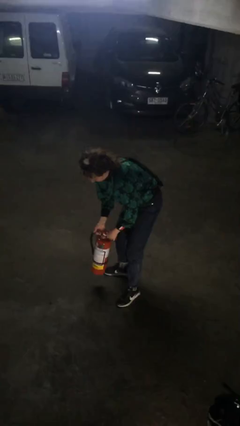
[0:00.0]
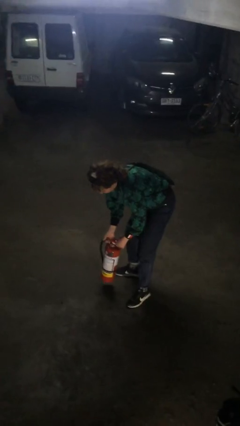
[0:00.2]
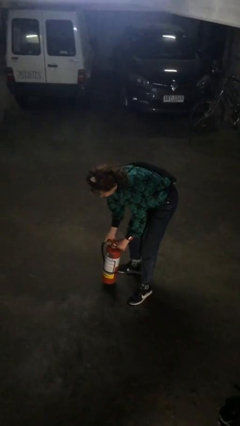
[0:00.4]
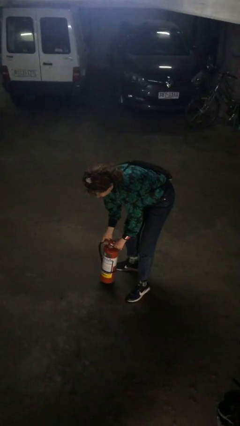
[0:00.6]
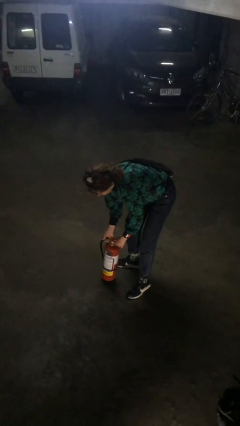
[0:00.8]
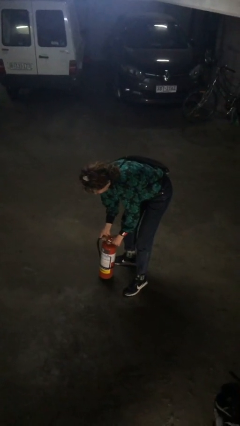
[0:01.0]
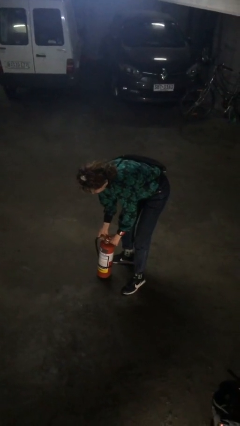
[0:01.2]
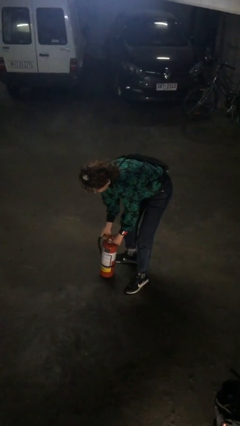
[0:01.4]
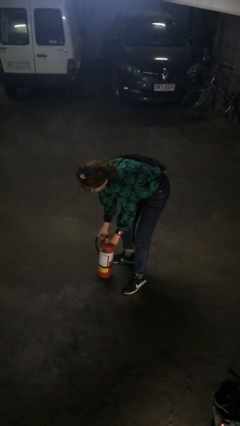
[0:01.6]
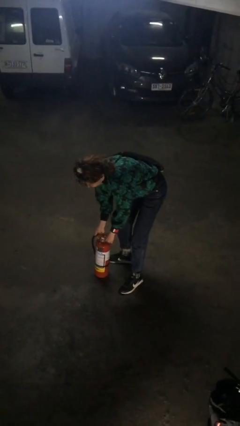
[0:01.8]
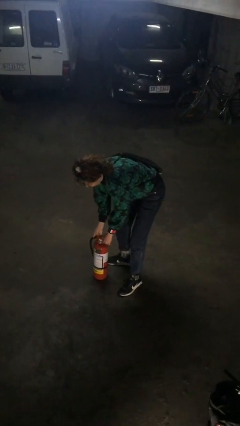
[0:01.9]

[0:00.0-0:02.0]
person puts down object on floor

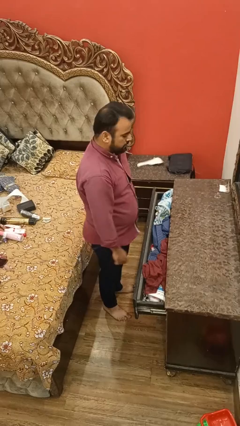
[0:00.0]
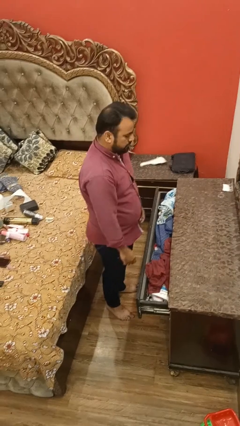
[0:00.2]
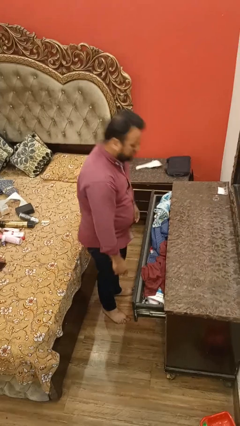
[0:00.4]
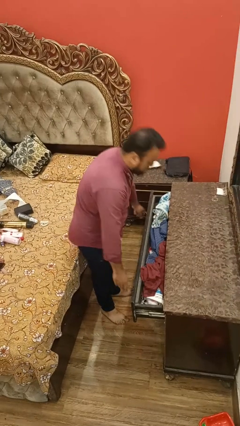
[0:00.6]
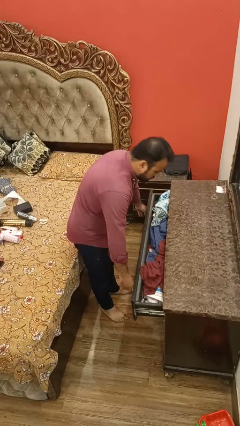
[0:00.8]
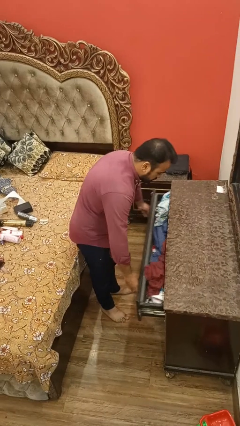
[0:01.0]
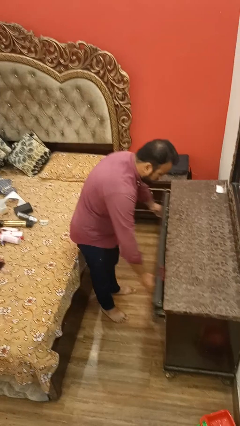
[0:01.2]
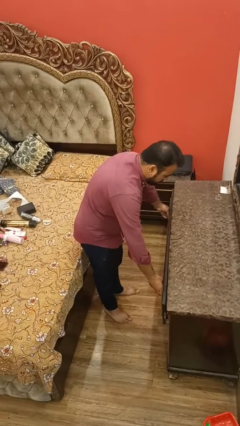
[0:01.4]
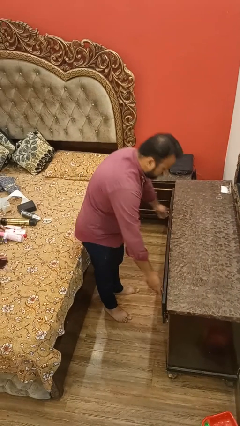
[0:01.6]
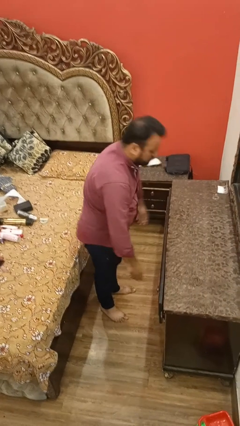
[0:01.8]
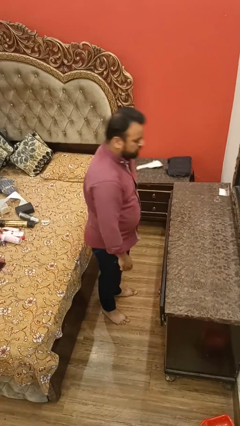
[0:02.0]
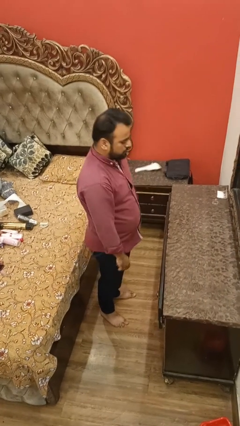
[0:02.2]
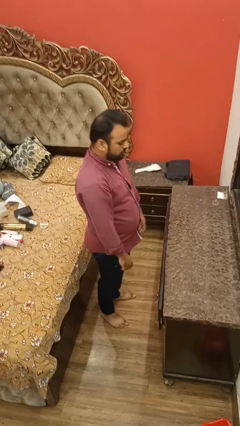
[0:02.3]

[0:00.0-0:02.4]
person closes dresser drawer

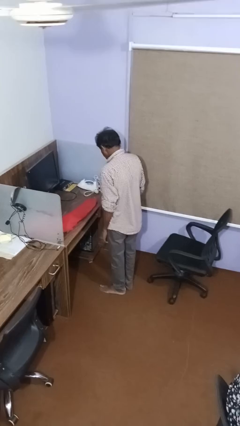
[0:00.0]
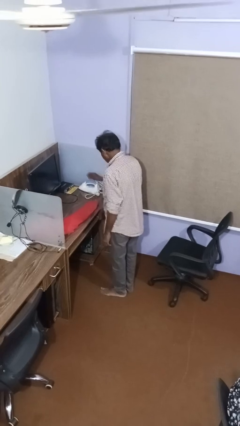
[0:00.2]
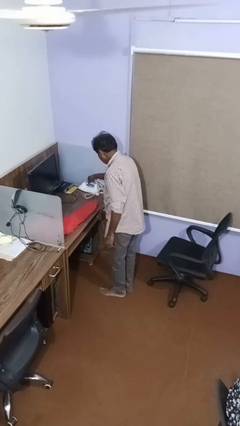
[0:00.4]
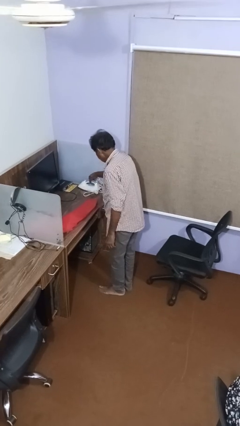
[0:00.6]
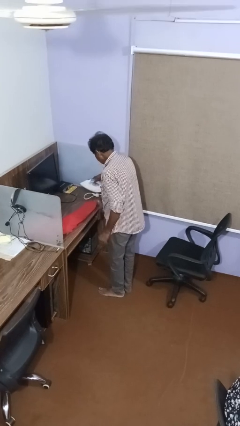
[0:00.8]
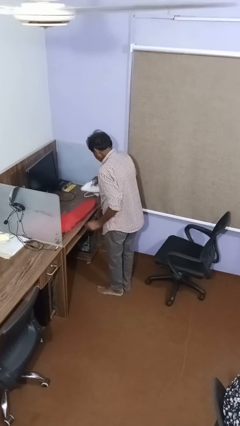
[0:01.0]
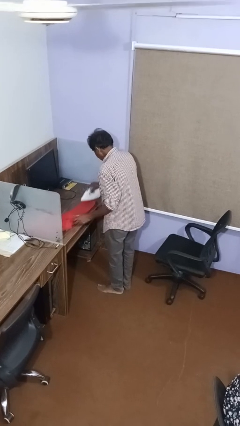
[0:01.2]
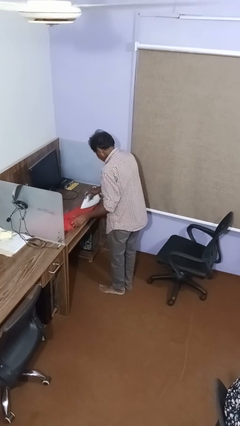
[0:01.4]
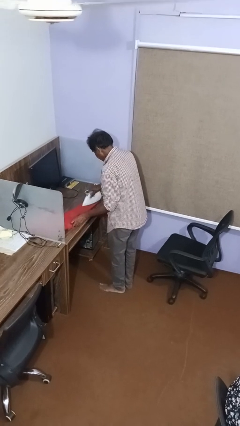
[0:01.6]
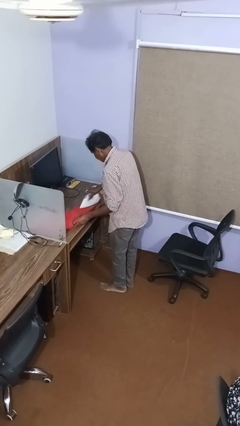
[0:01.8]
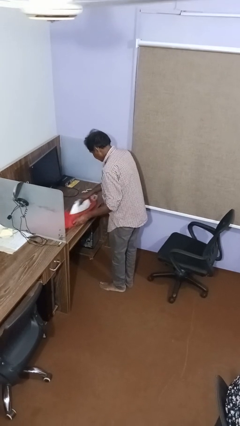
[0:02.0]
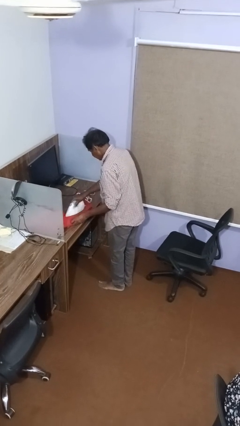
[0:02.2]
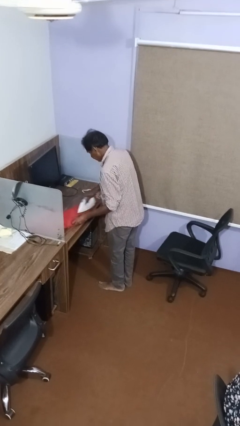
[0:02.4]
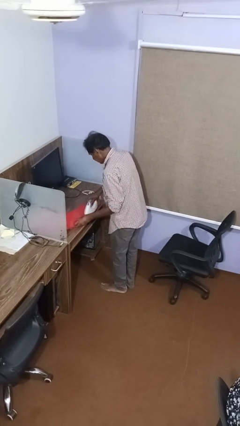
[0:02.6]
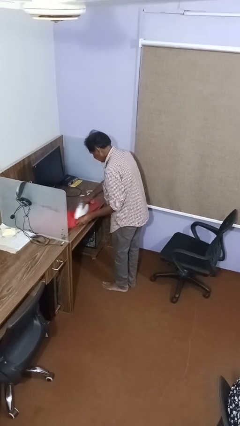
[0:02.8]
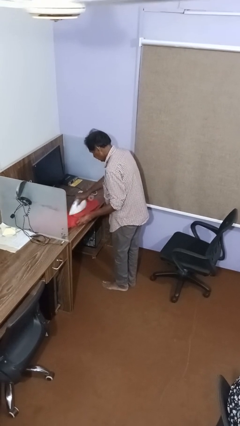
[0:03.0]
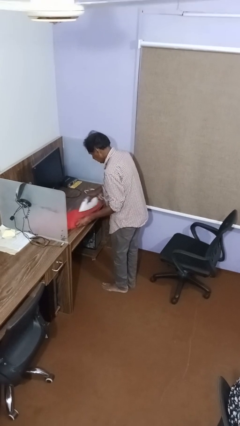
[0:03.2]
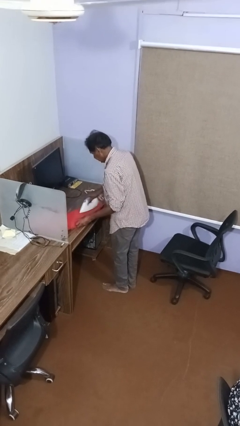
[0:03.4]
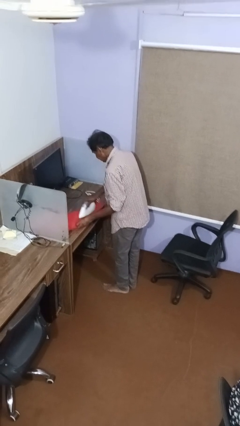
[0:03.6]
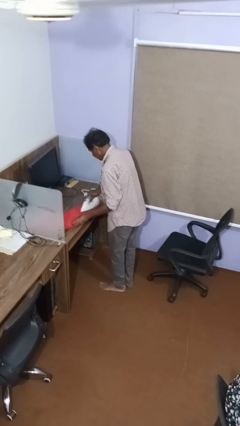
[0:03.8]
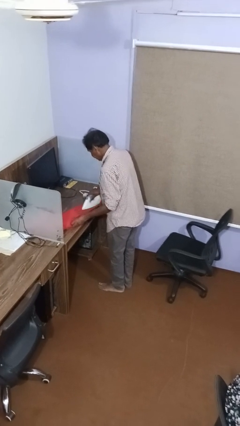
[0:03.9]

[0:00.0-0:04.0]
person irons clothes

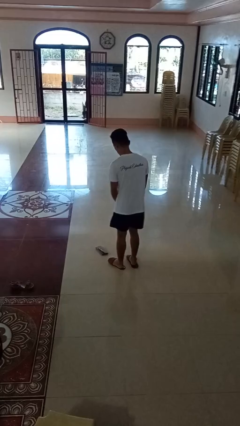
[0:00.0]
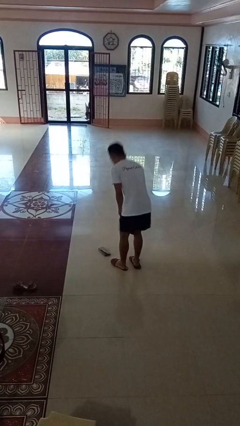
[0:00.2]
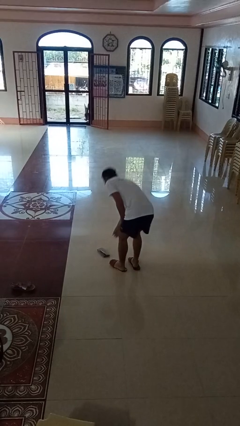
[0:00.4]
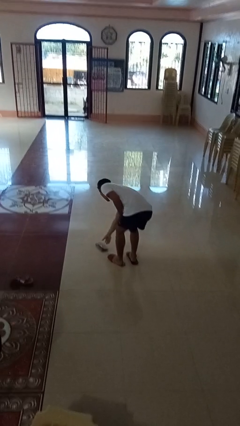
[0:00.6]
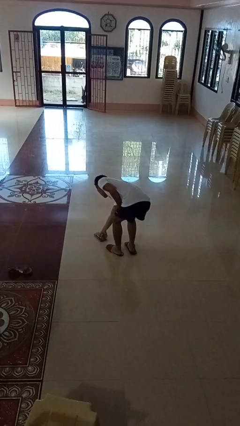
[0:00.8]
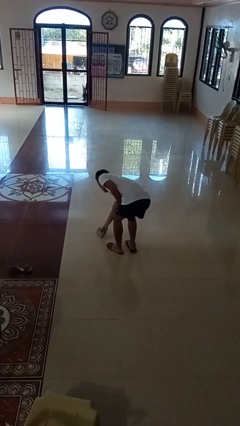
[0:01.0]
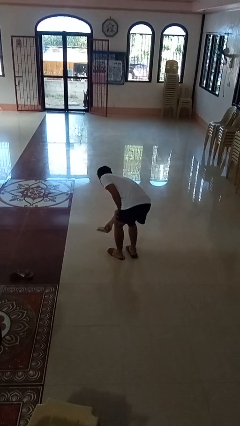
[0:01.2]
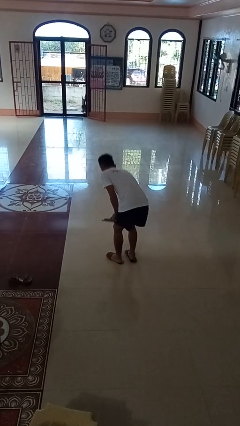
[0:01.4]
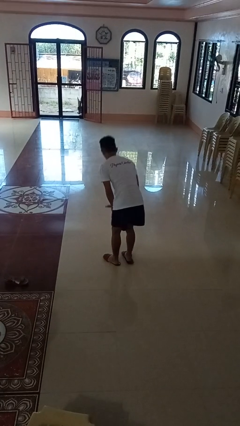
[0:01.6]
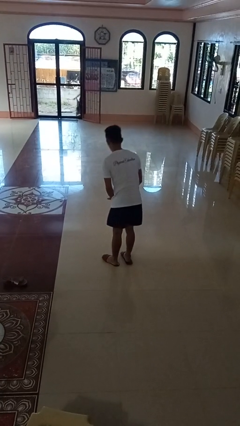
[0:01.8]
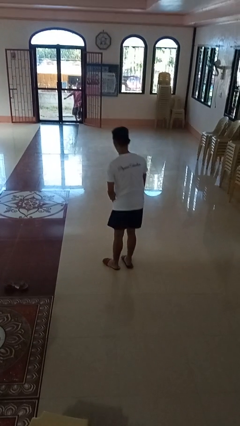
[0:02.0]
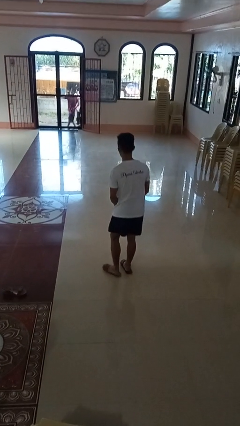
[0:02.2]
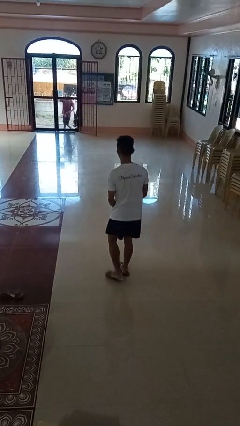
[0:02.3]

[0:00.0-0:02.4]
person picks up object from floor

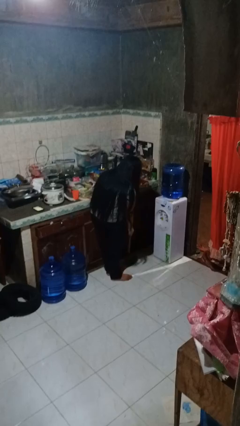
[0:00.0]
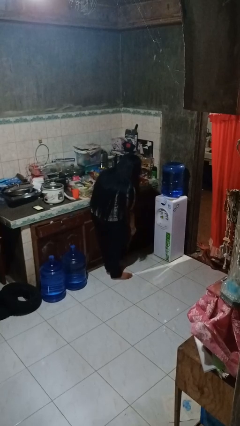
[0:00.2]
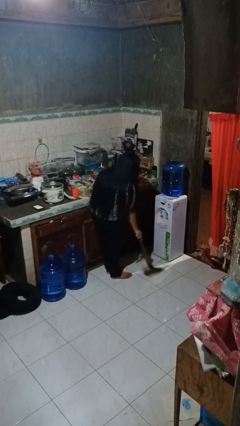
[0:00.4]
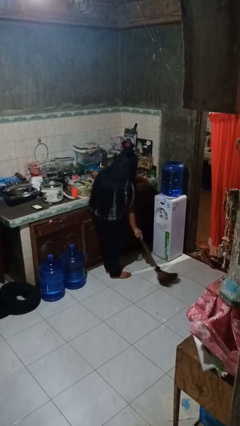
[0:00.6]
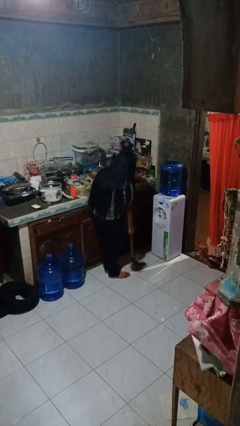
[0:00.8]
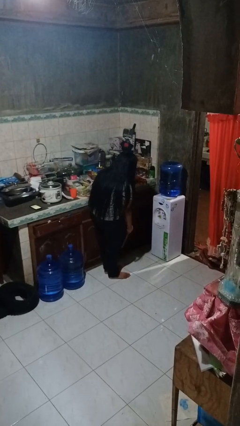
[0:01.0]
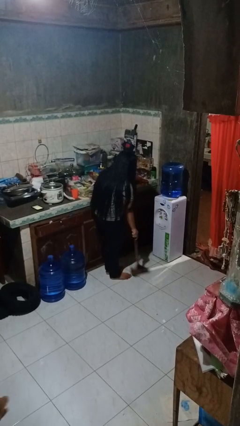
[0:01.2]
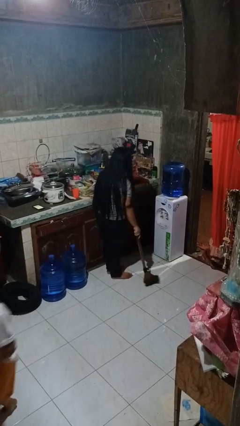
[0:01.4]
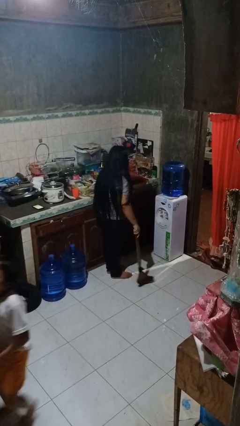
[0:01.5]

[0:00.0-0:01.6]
person sweeps floor

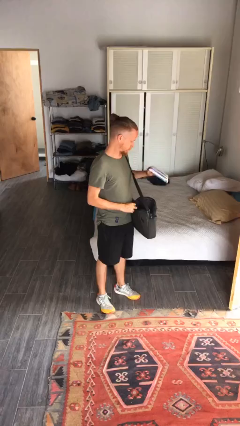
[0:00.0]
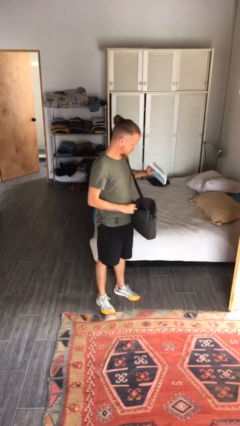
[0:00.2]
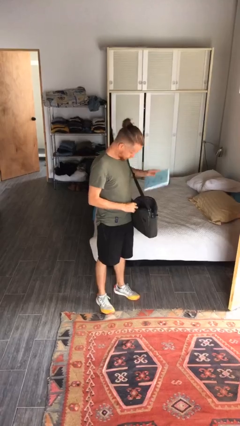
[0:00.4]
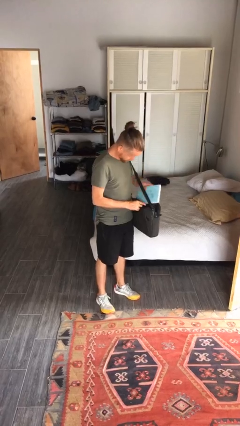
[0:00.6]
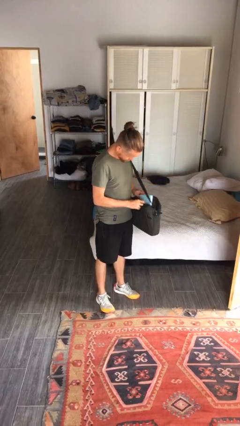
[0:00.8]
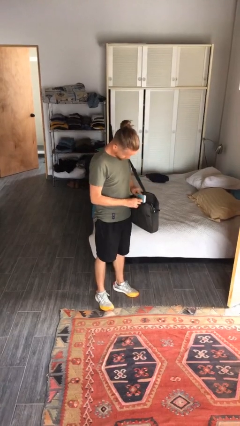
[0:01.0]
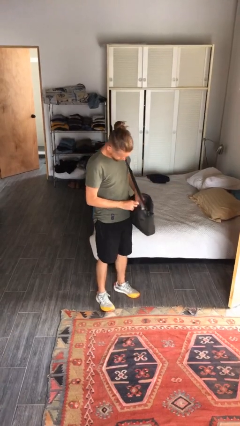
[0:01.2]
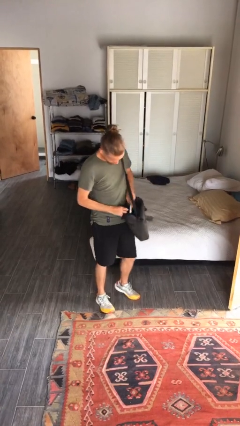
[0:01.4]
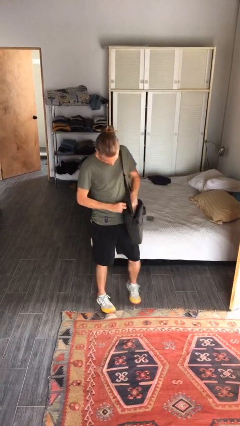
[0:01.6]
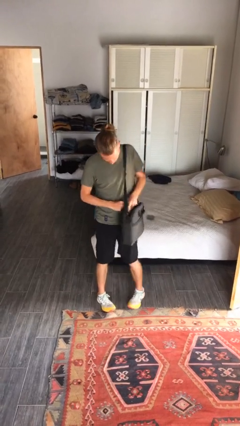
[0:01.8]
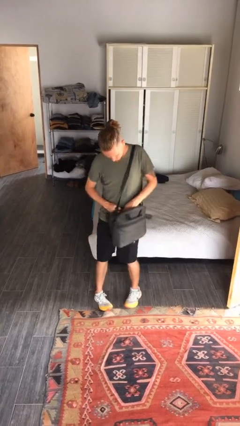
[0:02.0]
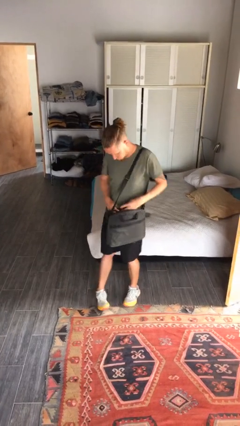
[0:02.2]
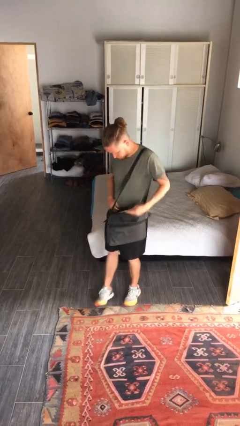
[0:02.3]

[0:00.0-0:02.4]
person puts object into purse

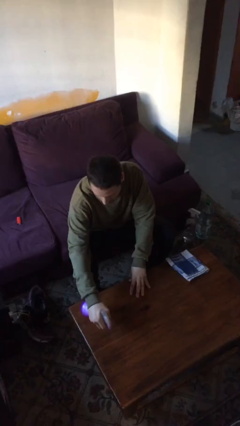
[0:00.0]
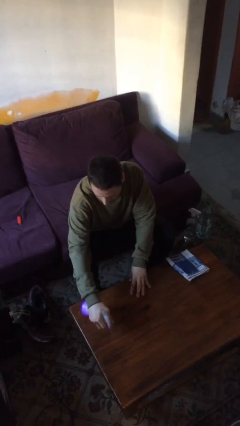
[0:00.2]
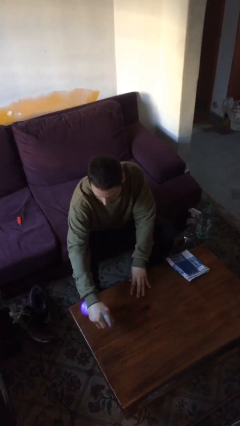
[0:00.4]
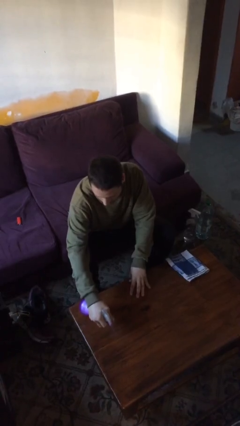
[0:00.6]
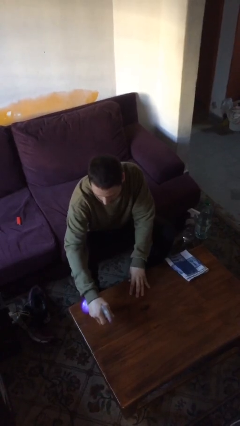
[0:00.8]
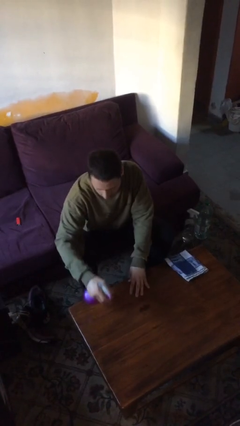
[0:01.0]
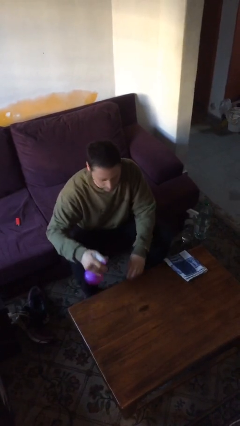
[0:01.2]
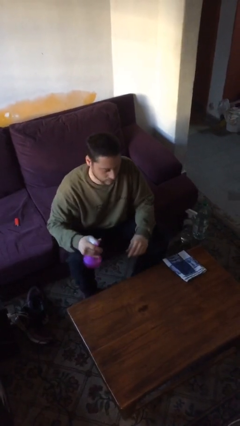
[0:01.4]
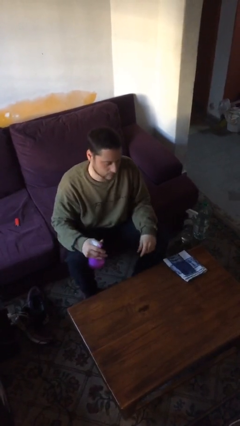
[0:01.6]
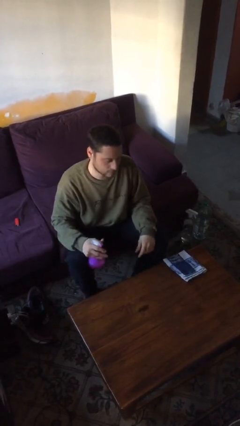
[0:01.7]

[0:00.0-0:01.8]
person sprays from bottle

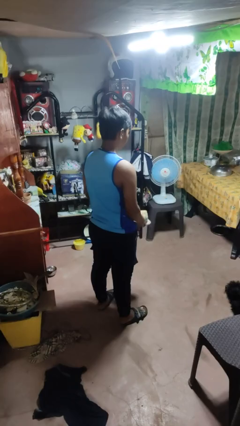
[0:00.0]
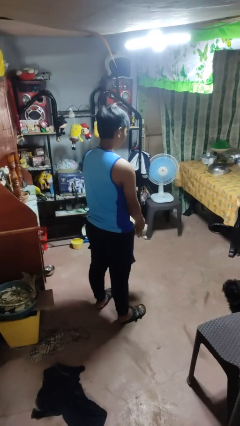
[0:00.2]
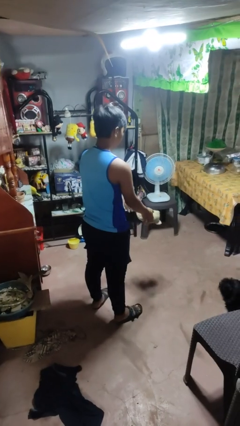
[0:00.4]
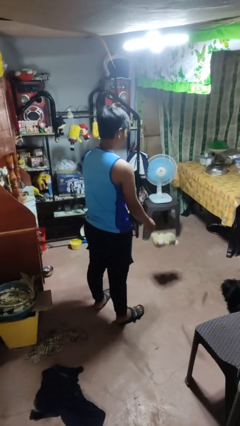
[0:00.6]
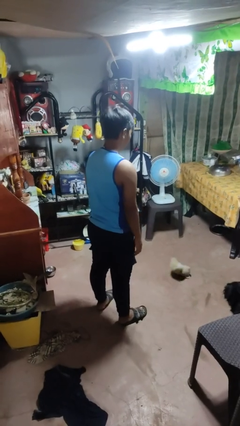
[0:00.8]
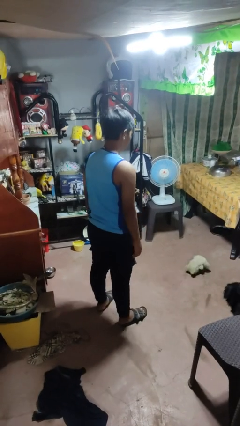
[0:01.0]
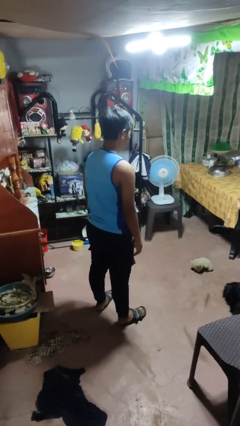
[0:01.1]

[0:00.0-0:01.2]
person throws object to ground
